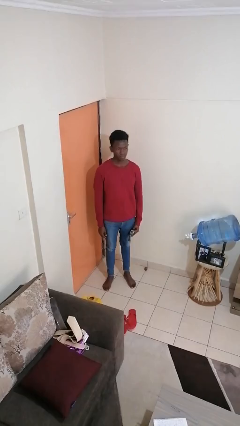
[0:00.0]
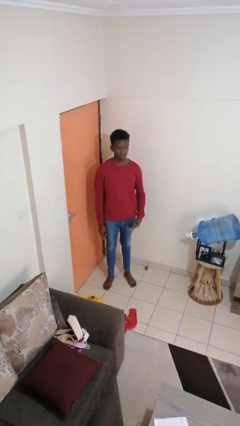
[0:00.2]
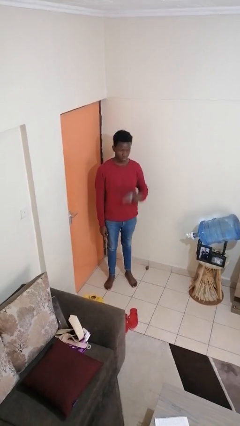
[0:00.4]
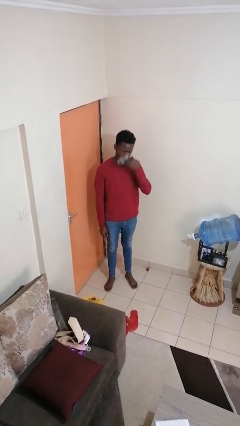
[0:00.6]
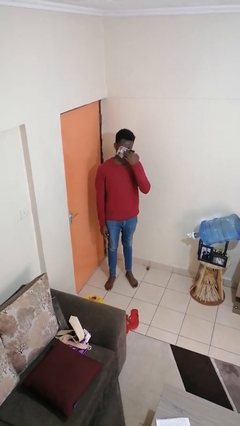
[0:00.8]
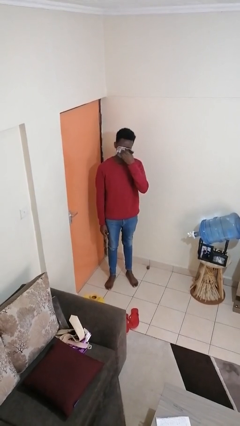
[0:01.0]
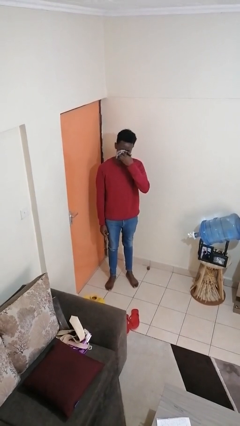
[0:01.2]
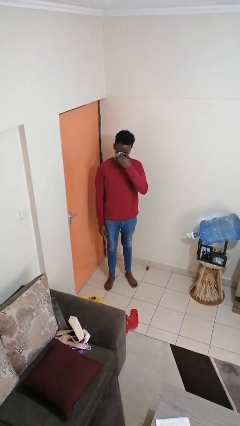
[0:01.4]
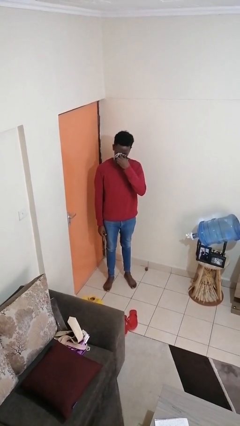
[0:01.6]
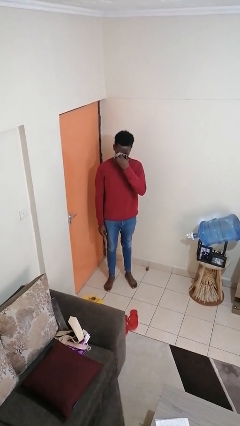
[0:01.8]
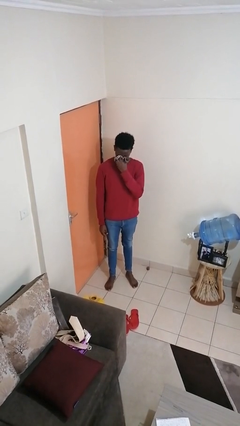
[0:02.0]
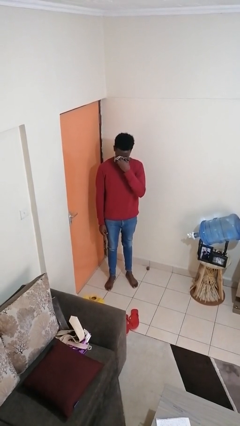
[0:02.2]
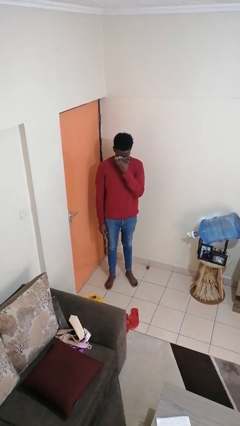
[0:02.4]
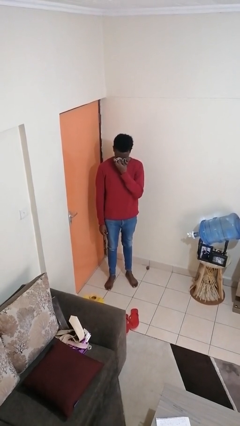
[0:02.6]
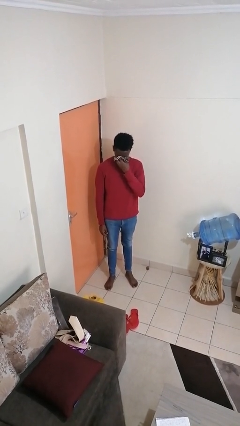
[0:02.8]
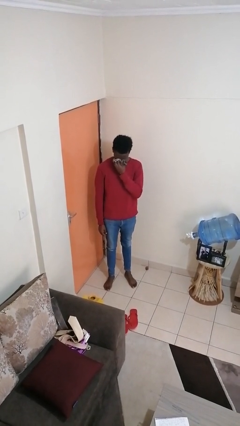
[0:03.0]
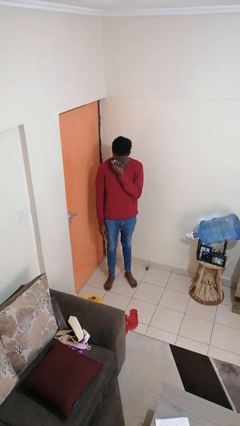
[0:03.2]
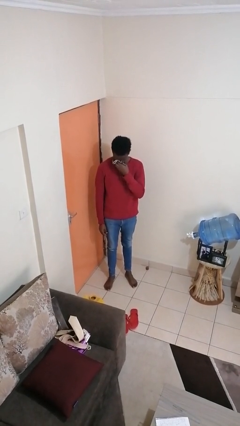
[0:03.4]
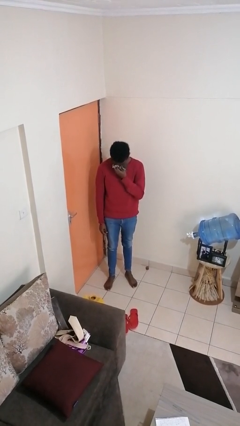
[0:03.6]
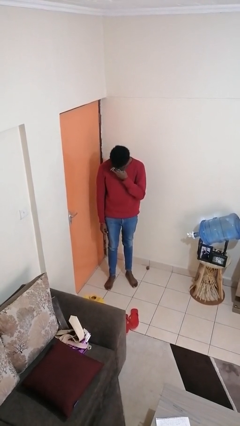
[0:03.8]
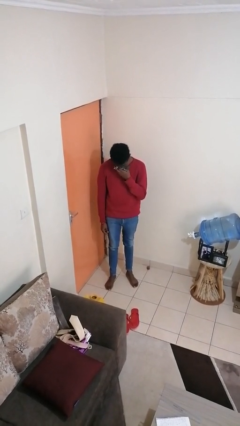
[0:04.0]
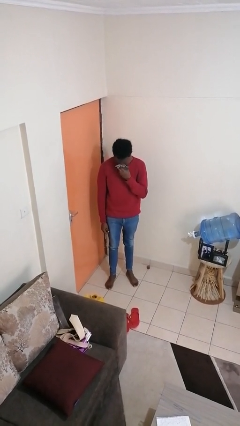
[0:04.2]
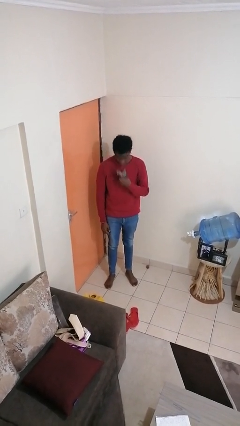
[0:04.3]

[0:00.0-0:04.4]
person blows nose

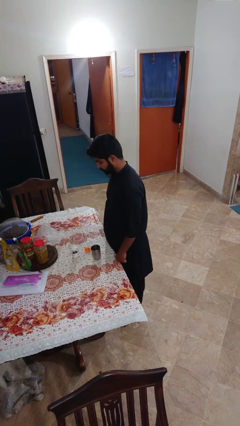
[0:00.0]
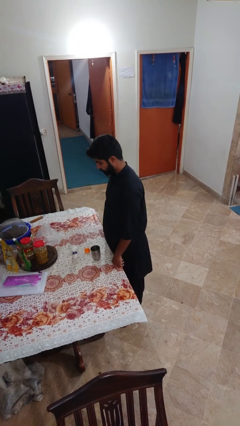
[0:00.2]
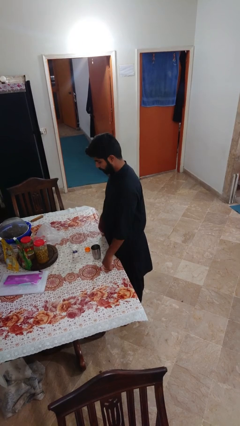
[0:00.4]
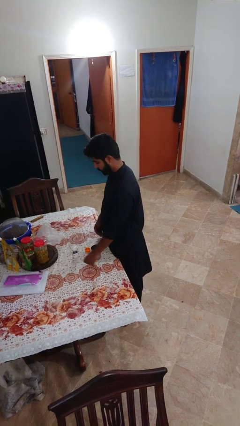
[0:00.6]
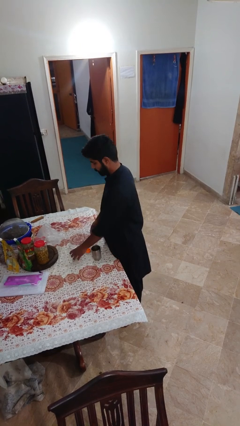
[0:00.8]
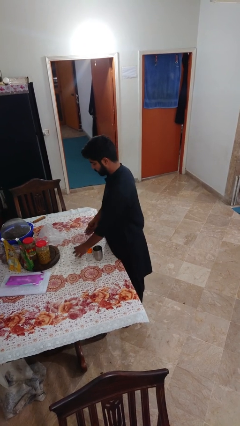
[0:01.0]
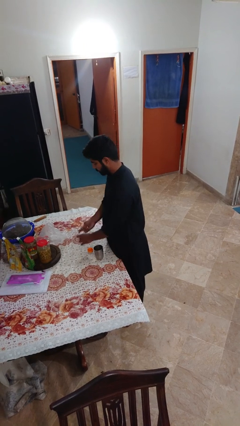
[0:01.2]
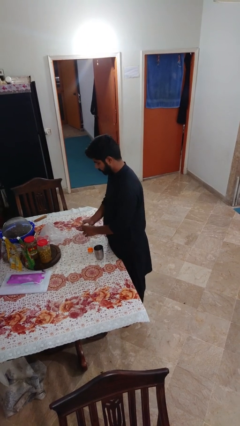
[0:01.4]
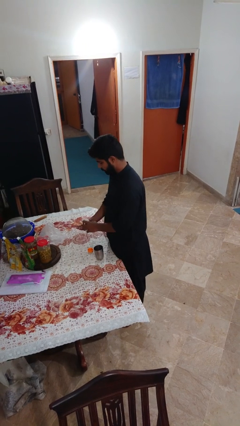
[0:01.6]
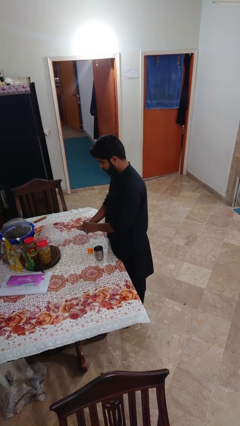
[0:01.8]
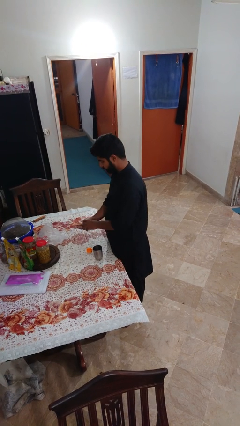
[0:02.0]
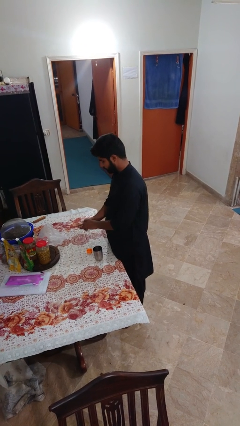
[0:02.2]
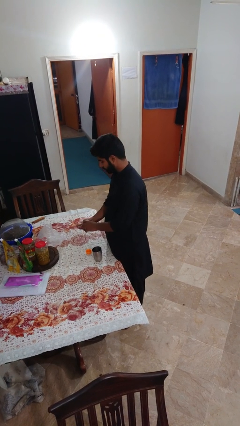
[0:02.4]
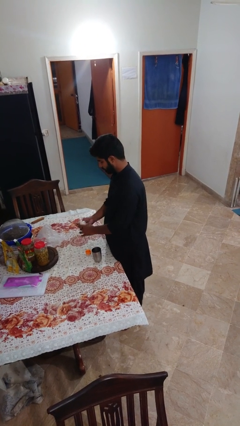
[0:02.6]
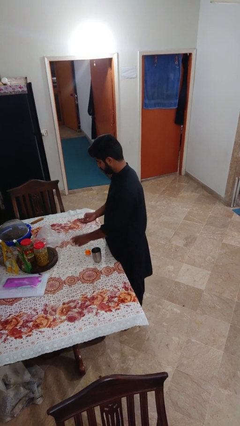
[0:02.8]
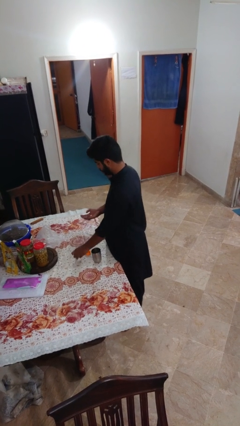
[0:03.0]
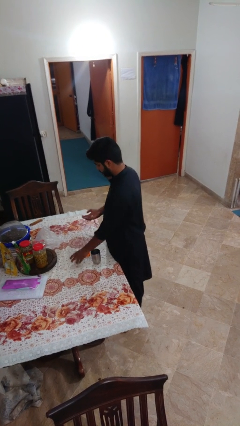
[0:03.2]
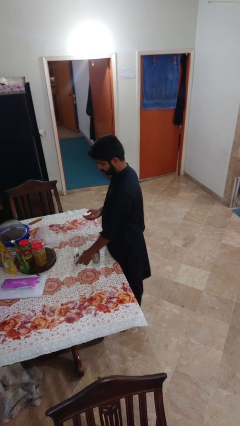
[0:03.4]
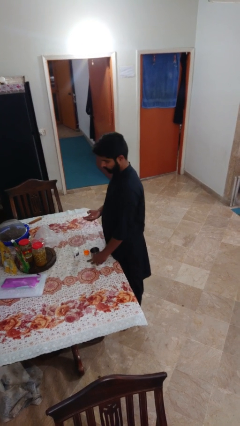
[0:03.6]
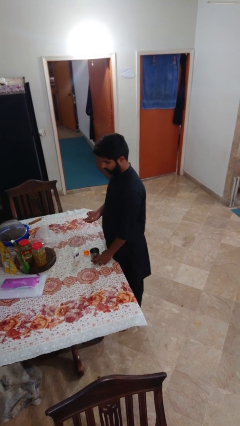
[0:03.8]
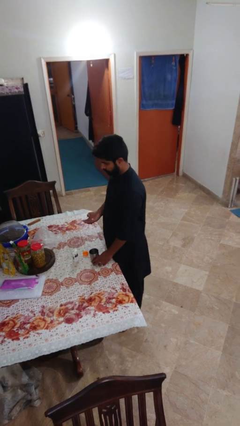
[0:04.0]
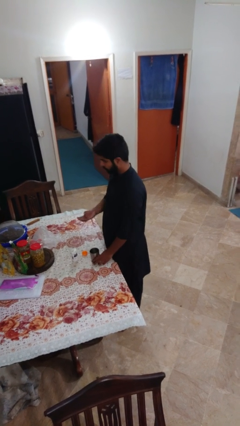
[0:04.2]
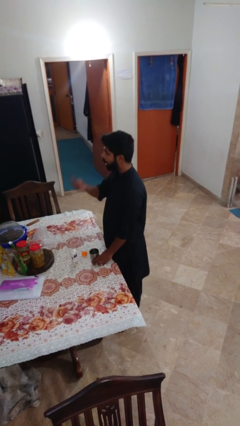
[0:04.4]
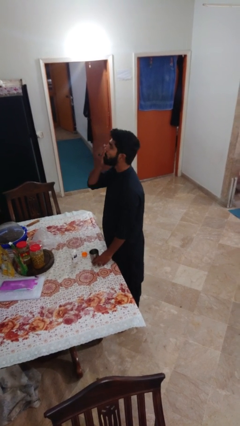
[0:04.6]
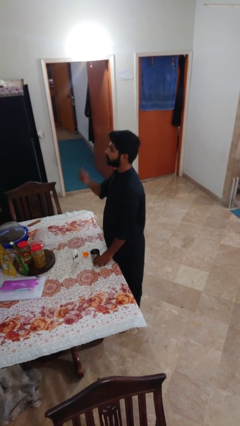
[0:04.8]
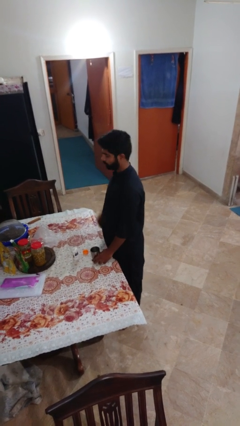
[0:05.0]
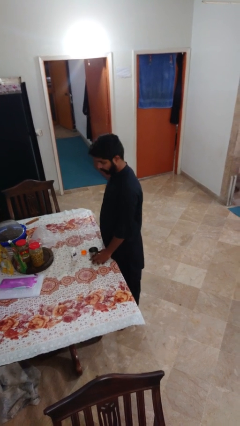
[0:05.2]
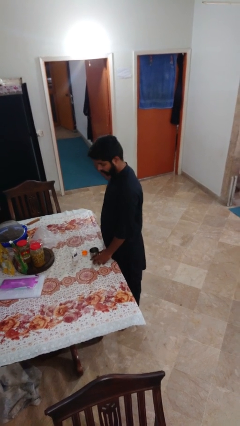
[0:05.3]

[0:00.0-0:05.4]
person takes medicine pills

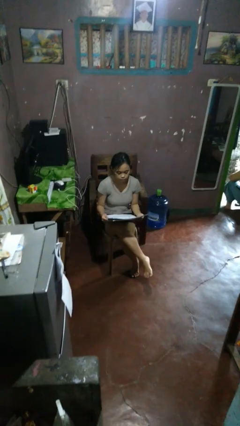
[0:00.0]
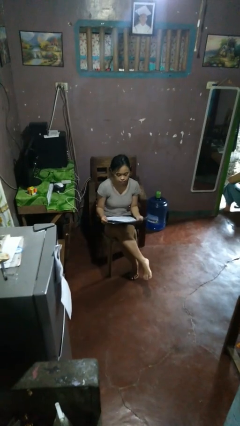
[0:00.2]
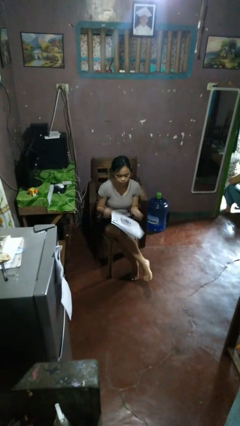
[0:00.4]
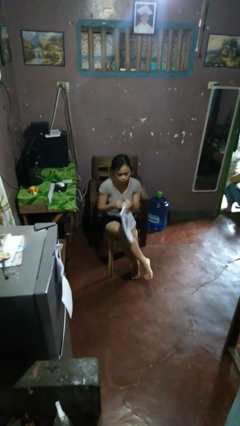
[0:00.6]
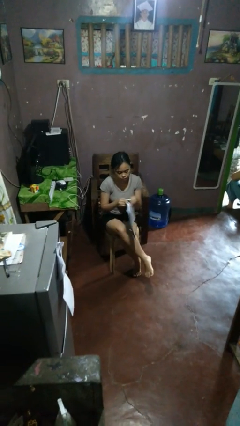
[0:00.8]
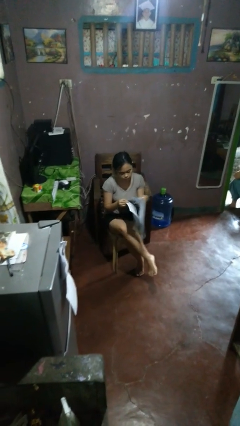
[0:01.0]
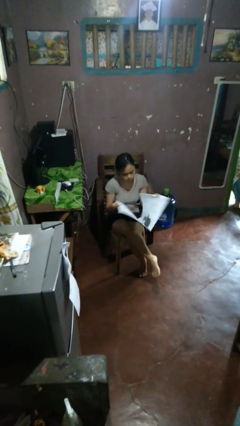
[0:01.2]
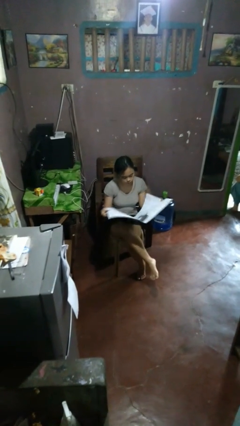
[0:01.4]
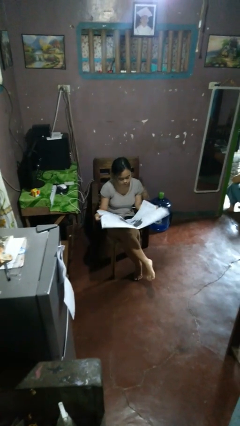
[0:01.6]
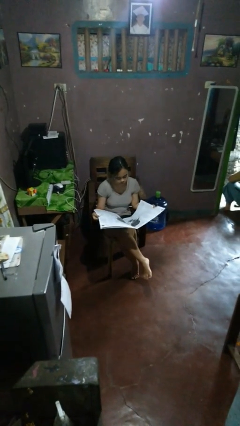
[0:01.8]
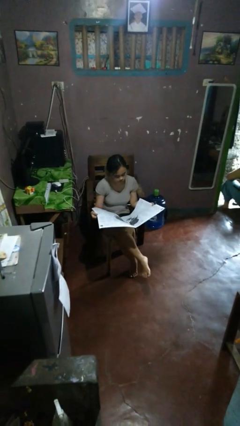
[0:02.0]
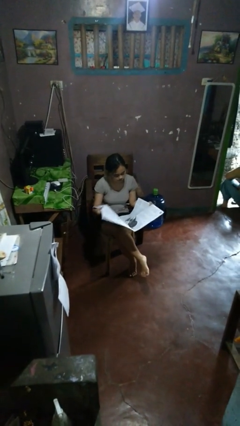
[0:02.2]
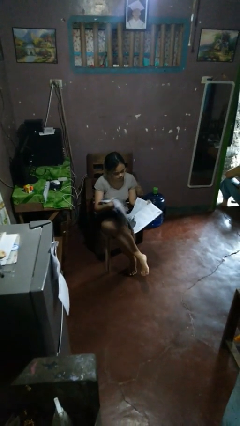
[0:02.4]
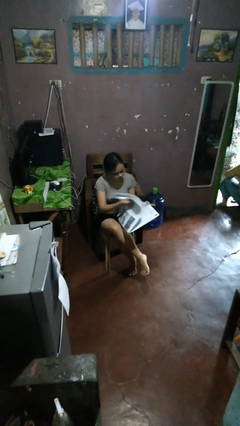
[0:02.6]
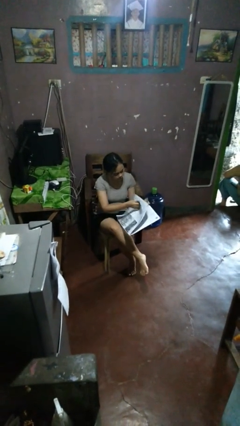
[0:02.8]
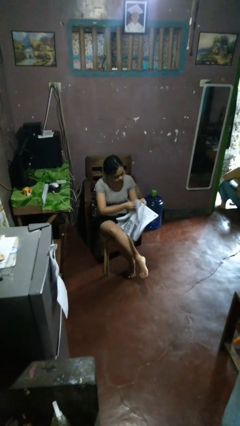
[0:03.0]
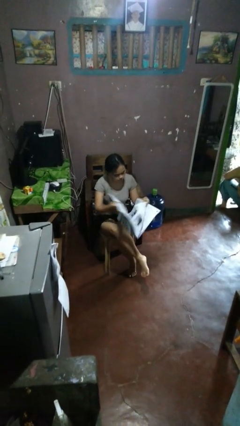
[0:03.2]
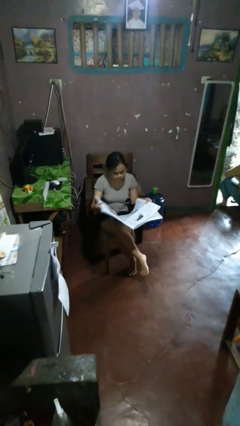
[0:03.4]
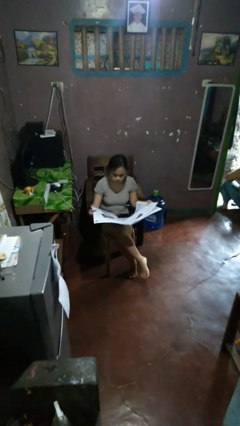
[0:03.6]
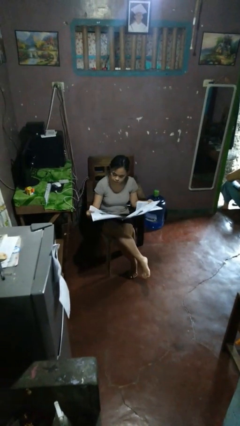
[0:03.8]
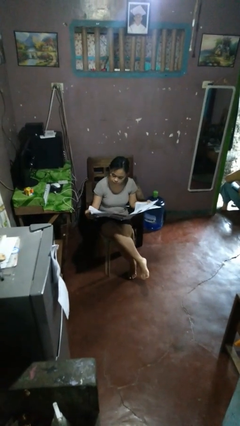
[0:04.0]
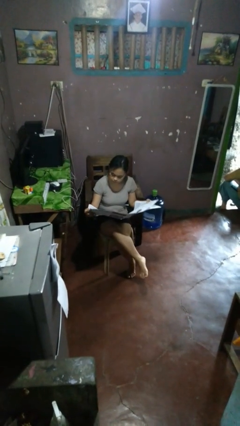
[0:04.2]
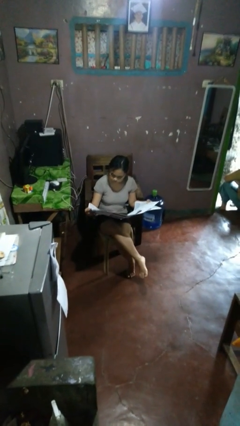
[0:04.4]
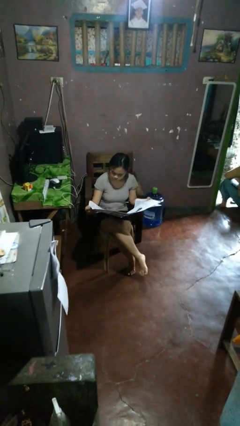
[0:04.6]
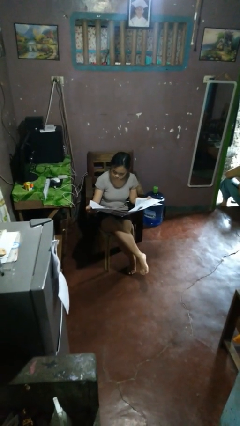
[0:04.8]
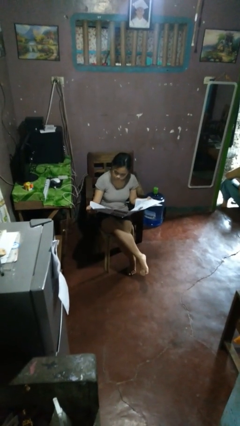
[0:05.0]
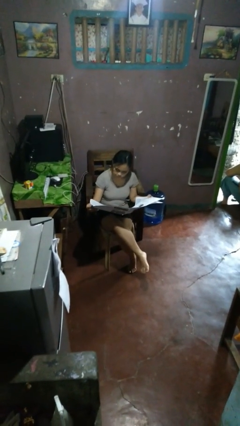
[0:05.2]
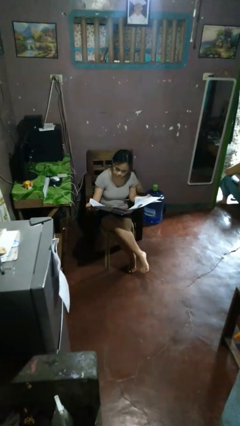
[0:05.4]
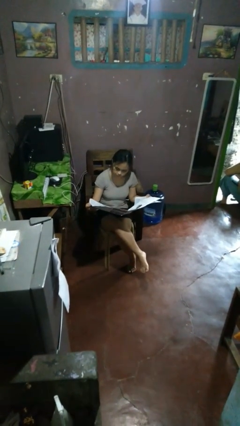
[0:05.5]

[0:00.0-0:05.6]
person reads newspaper

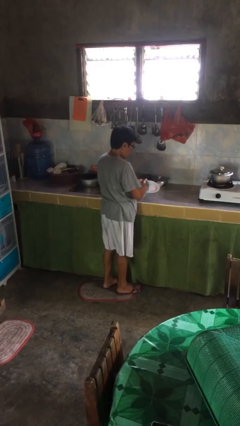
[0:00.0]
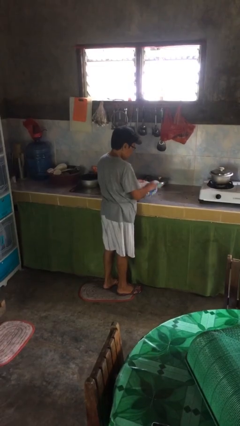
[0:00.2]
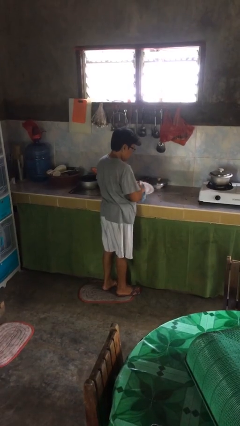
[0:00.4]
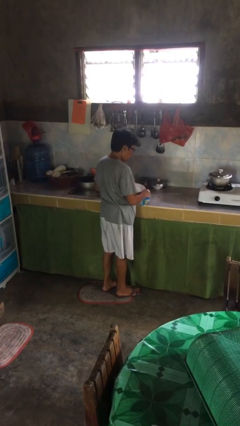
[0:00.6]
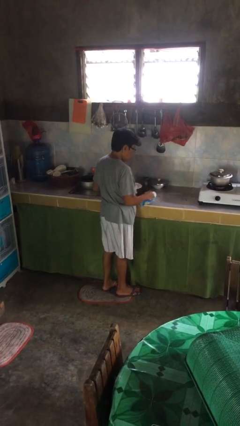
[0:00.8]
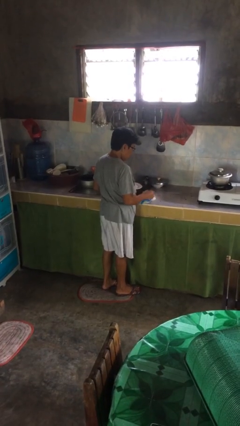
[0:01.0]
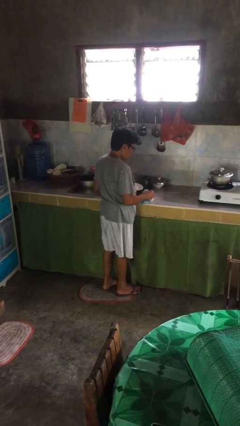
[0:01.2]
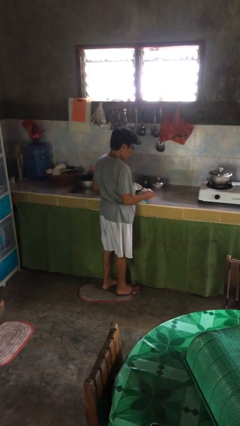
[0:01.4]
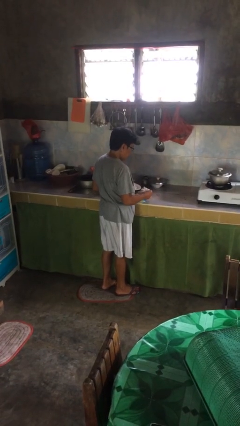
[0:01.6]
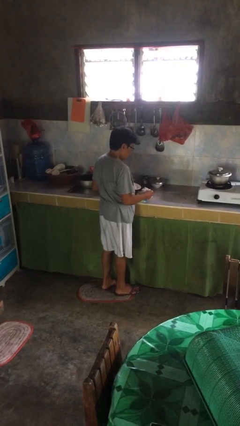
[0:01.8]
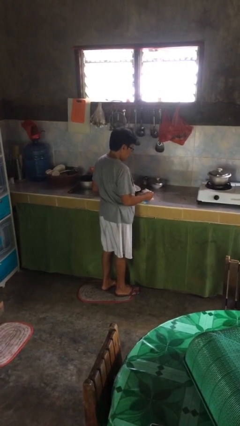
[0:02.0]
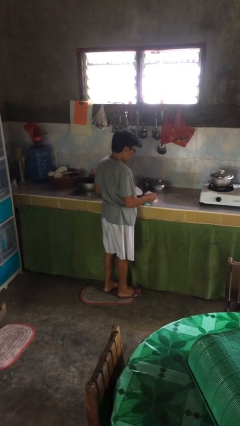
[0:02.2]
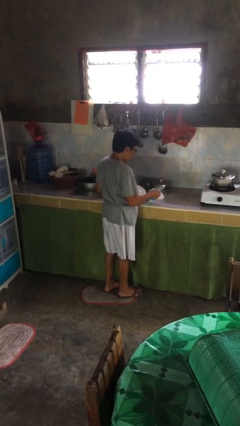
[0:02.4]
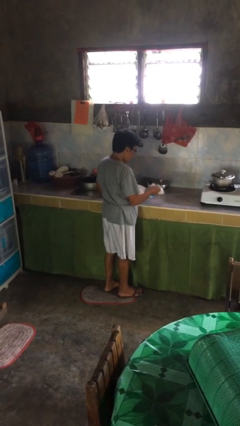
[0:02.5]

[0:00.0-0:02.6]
person dries dish
